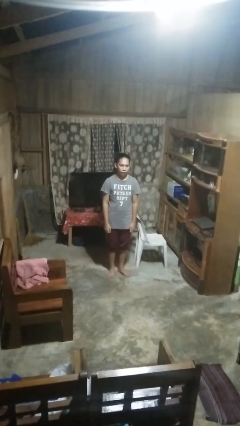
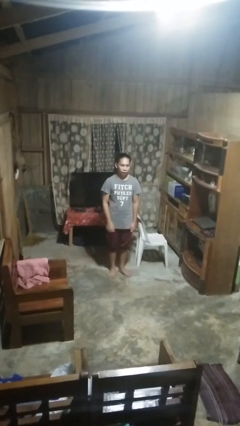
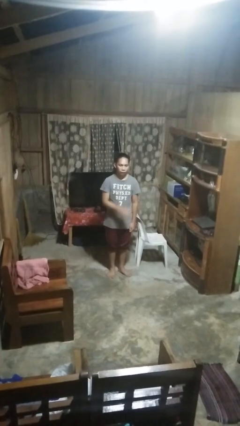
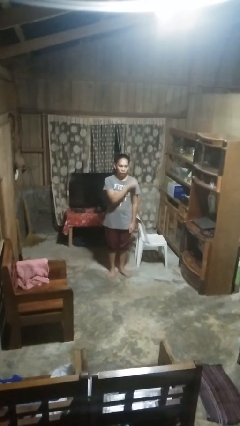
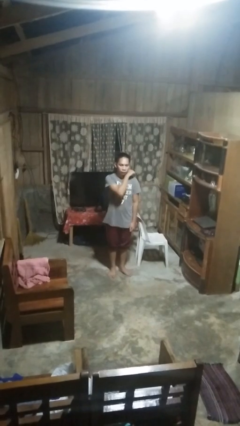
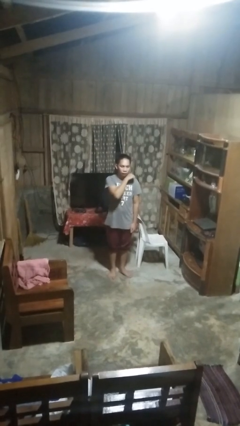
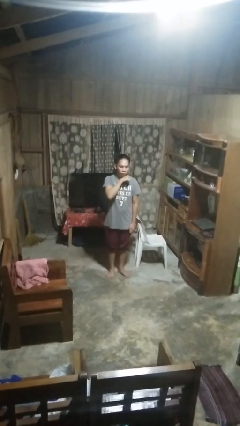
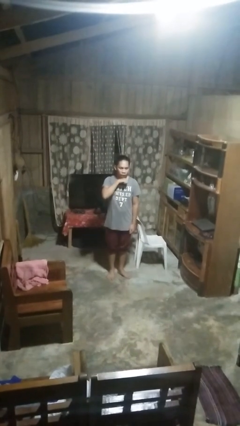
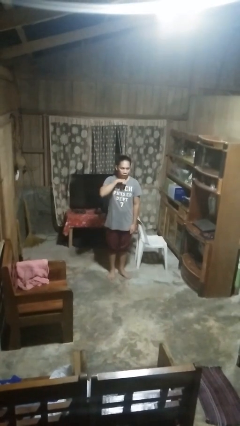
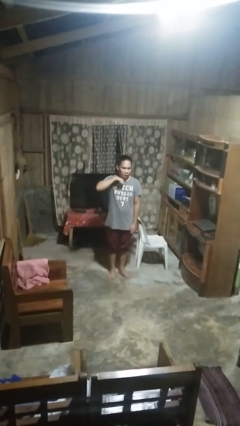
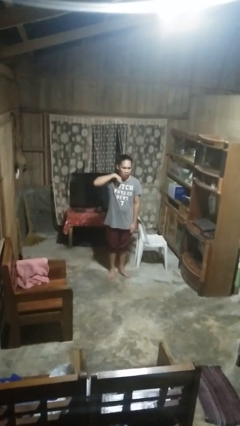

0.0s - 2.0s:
person gestures cut

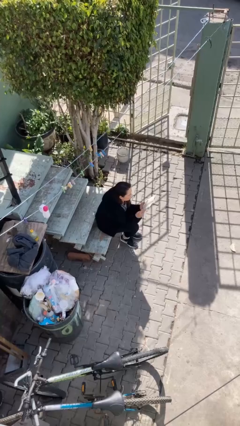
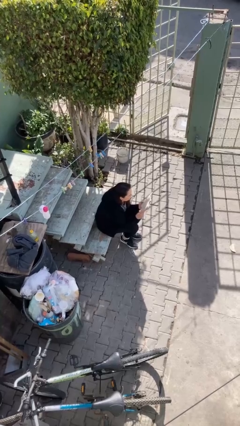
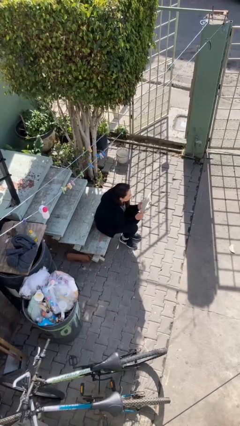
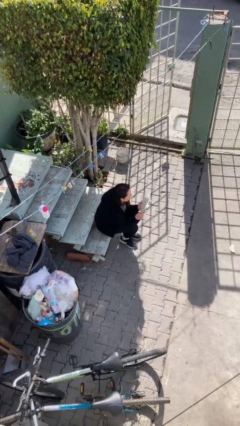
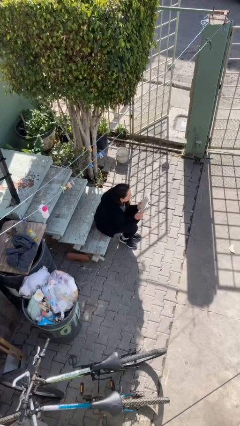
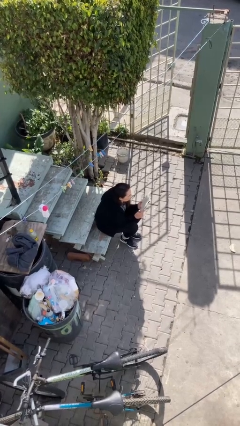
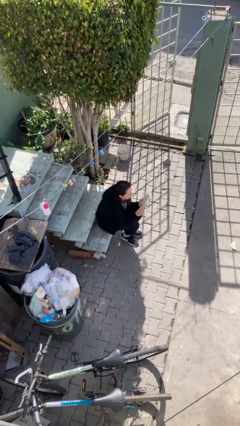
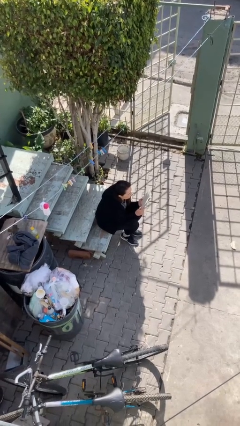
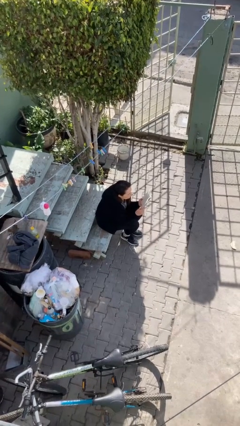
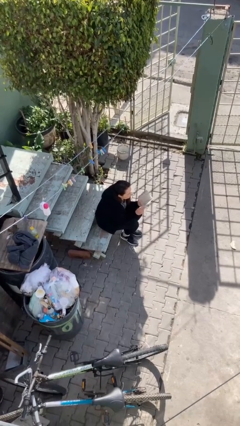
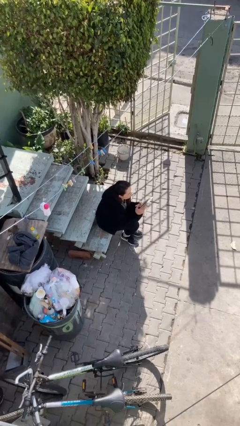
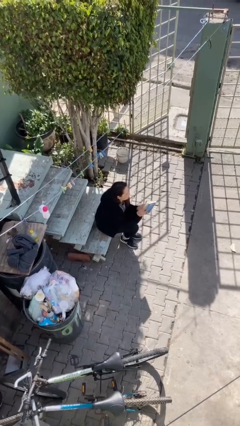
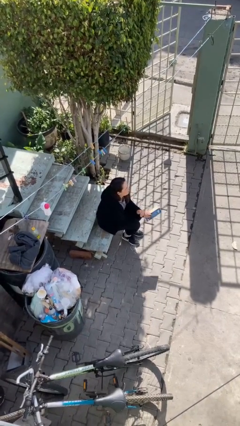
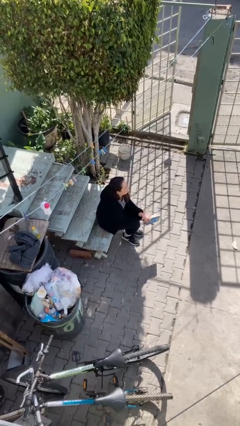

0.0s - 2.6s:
person reads document

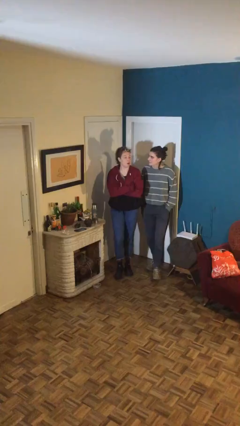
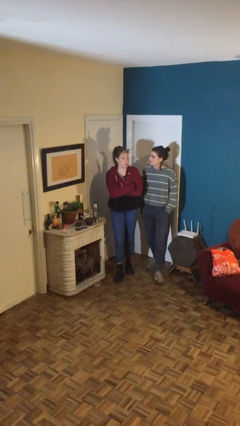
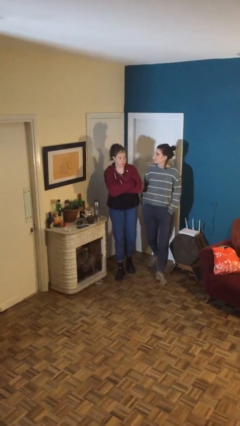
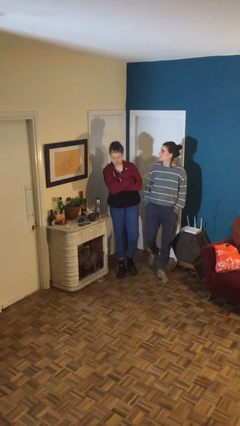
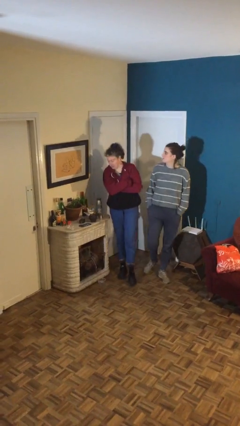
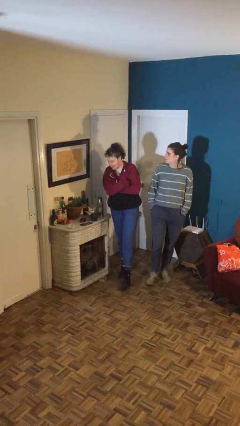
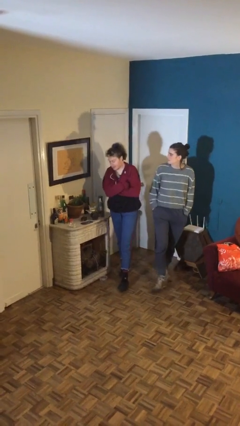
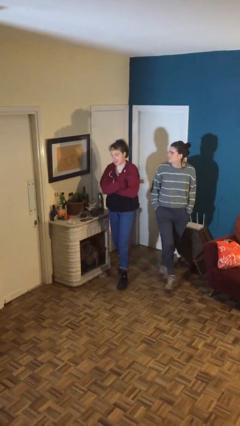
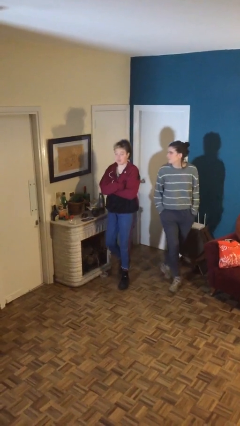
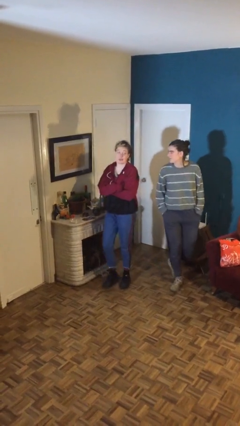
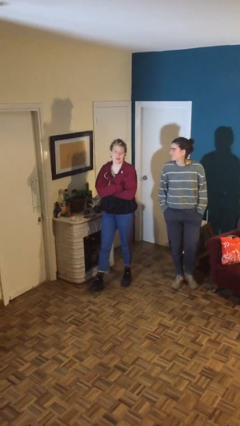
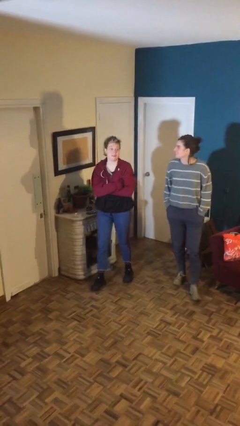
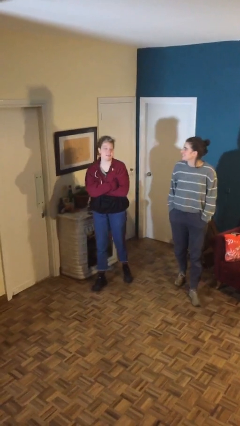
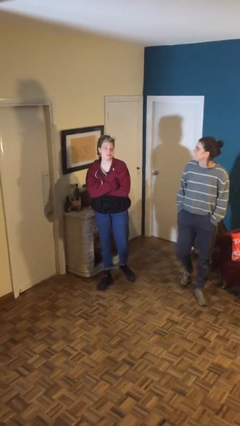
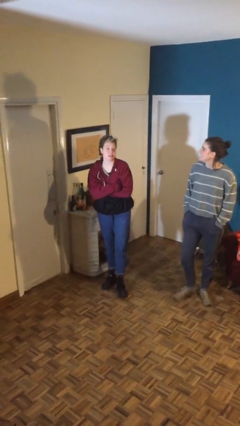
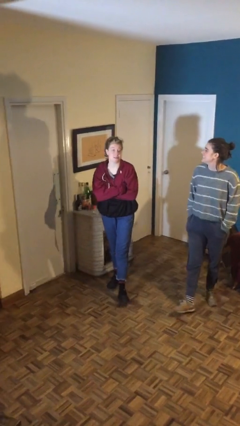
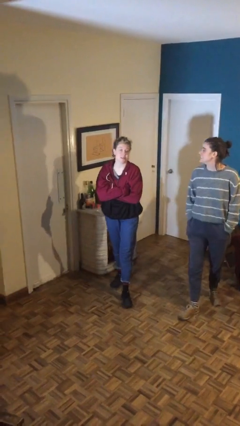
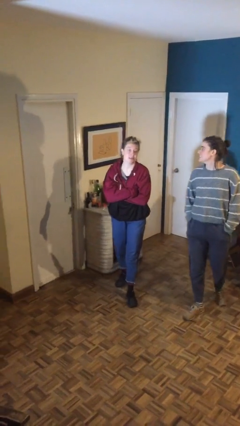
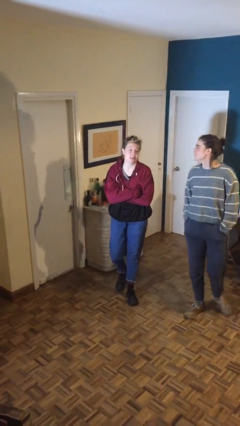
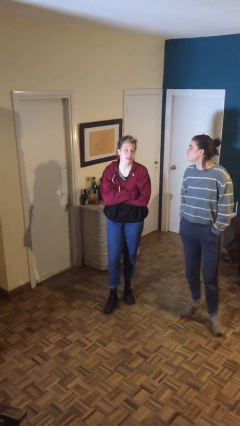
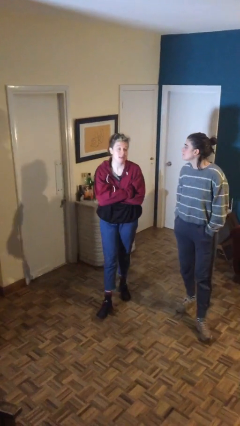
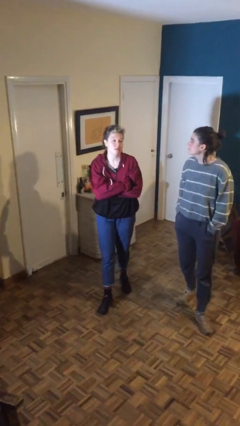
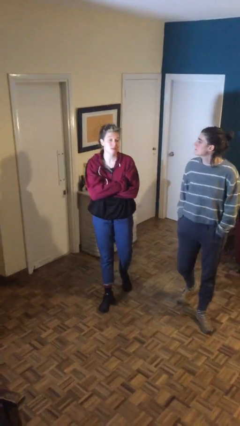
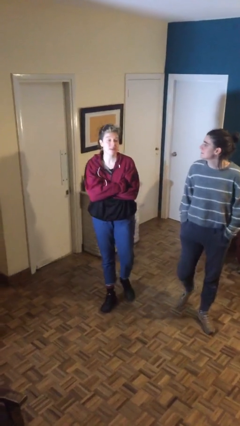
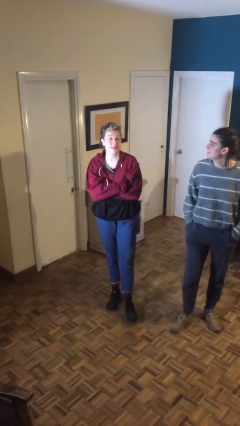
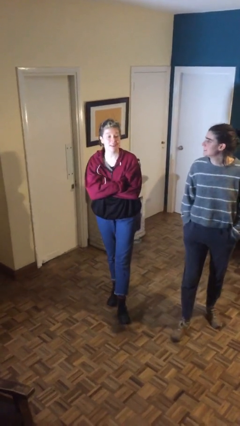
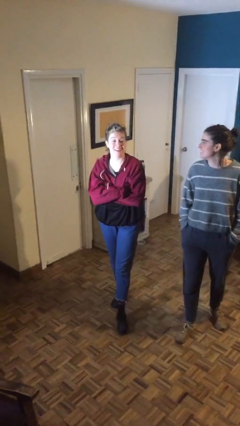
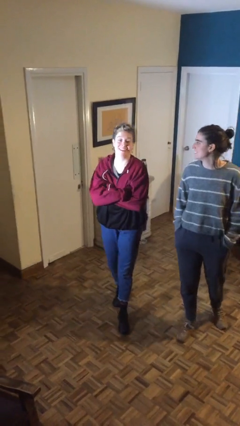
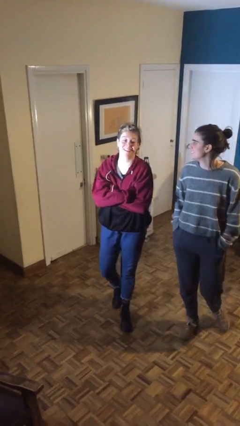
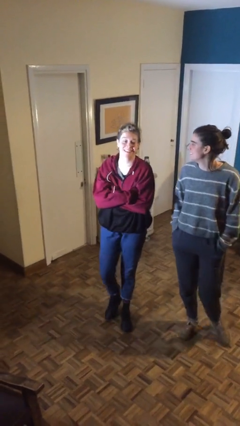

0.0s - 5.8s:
person talks to person

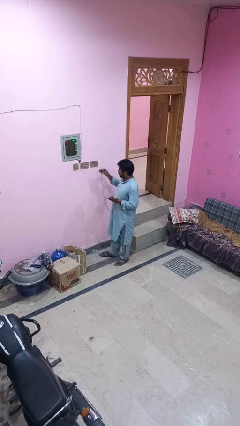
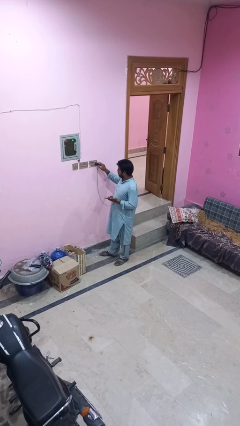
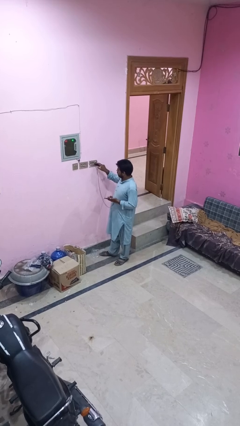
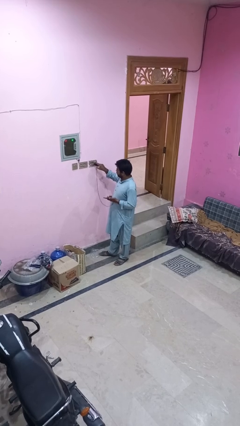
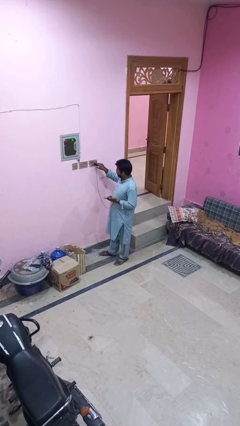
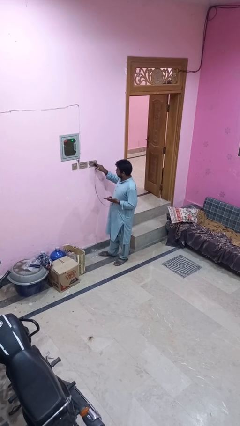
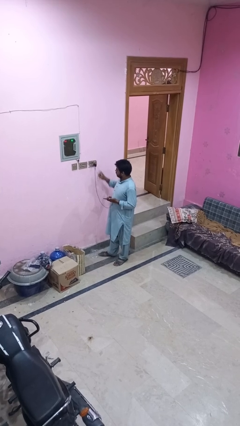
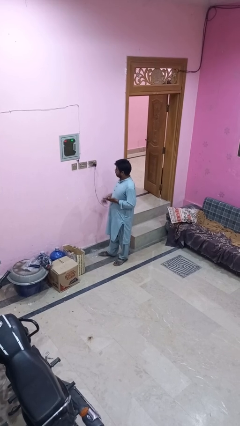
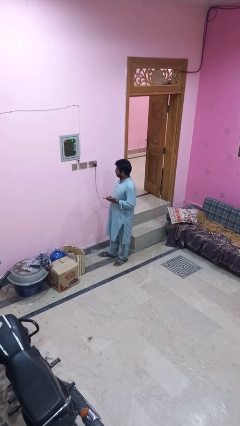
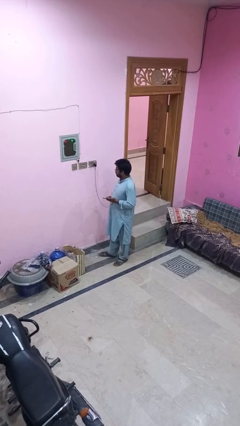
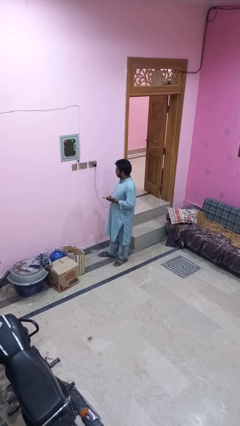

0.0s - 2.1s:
person plugs into electrical socket

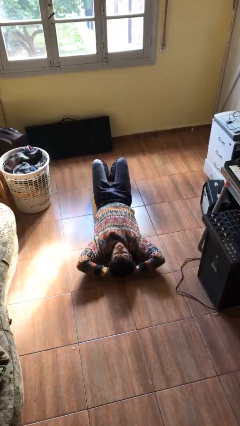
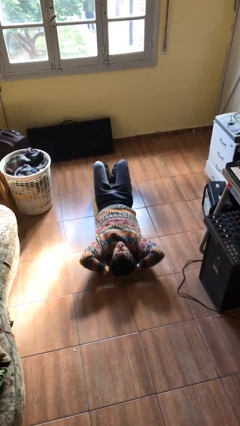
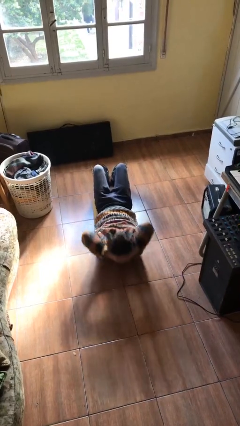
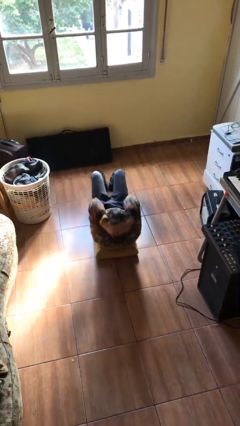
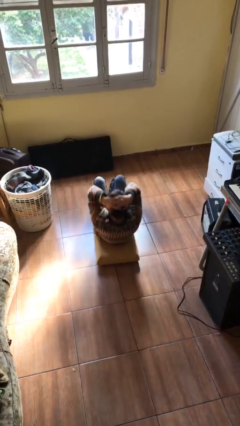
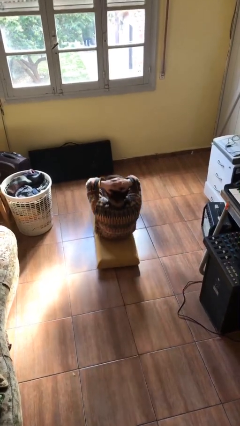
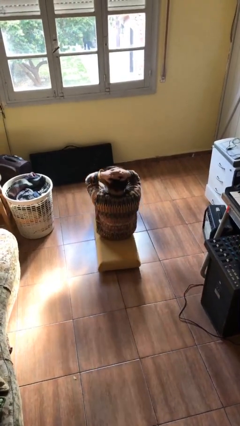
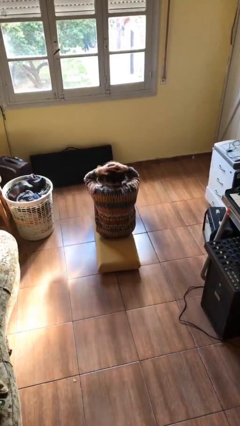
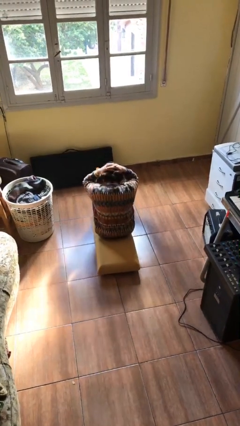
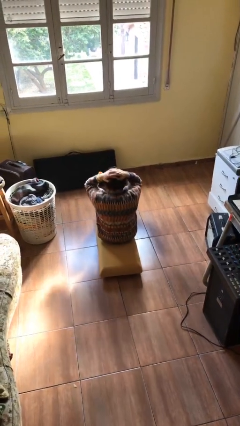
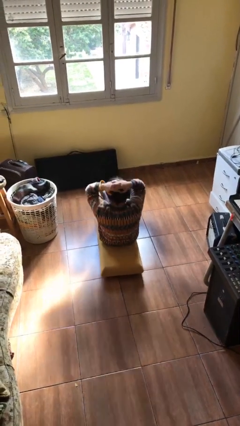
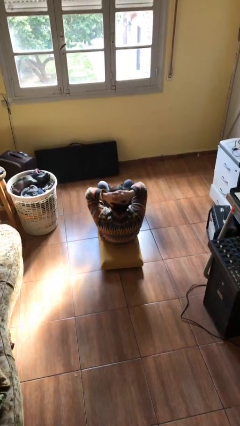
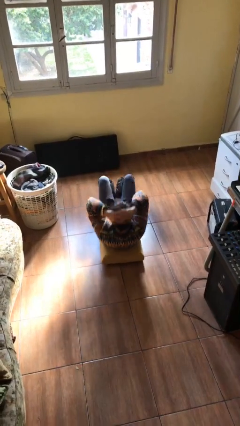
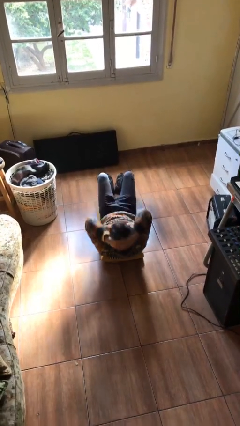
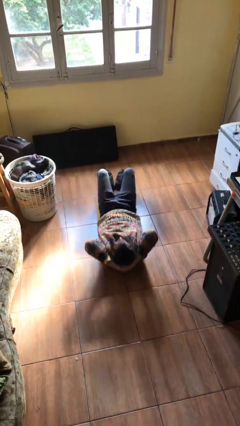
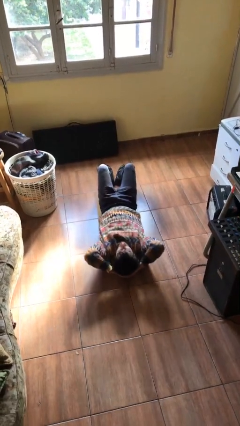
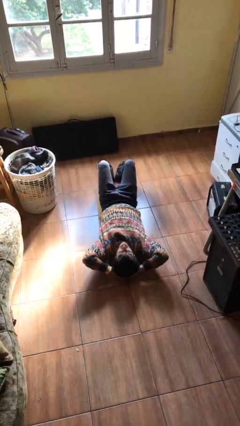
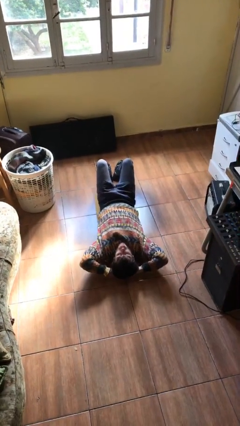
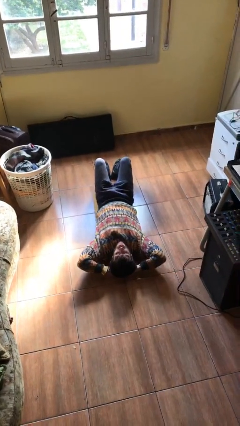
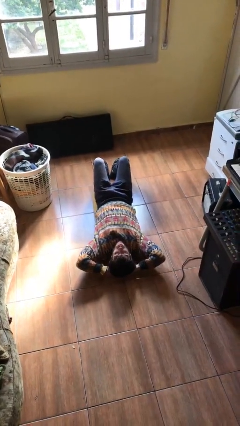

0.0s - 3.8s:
person exercises with situp

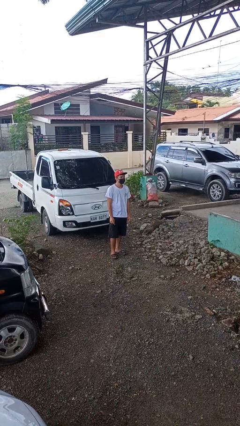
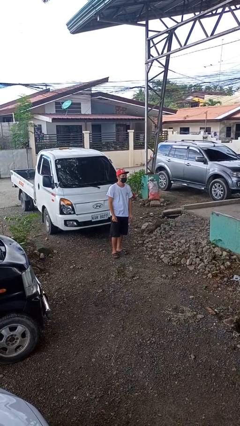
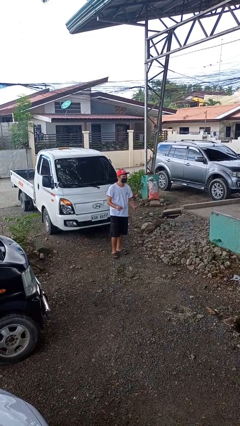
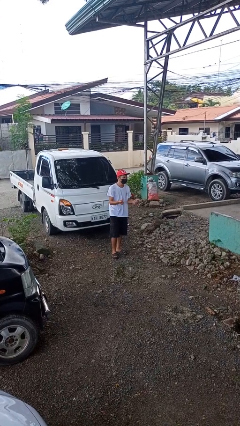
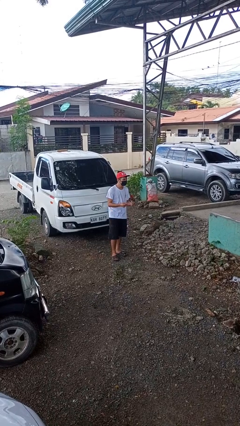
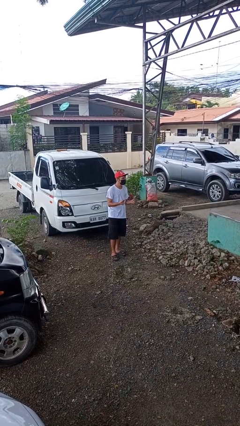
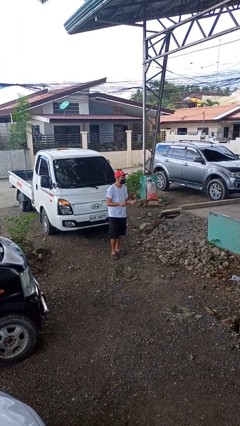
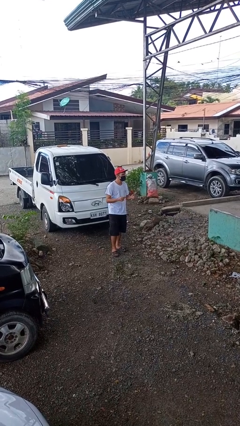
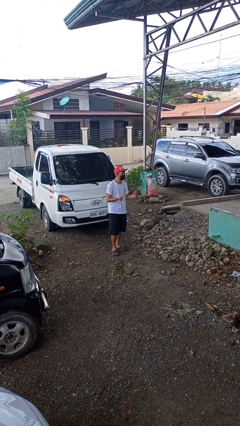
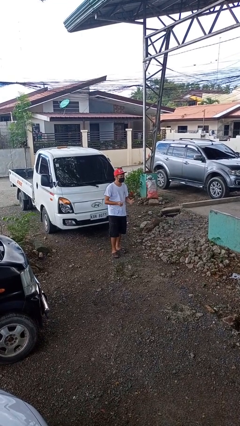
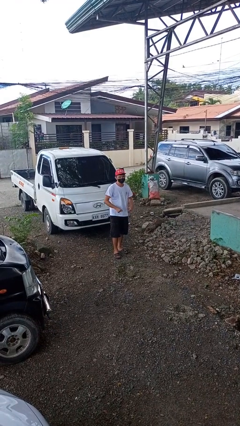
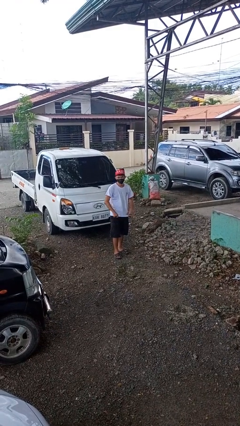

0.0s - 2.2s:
person snaps fingers
